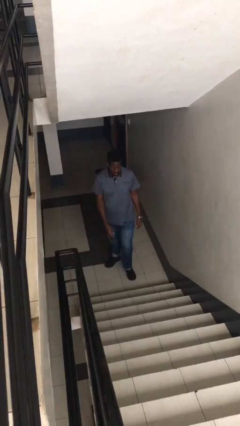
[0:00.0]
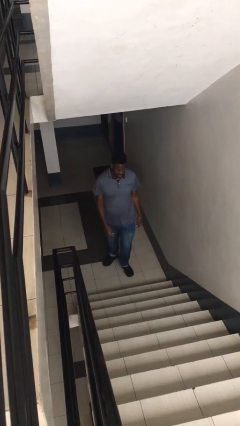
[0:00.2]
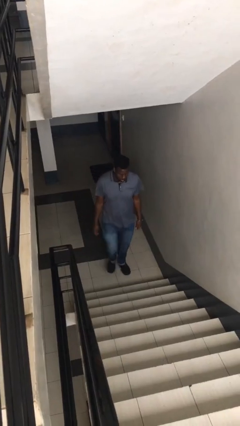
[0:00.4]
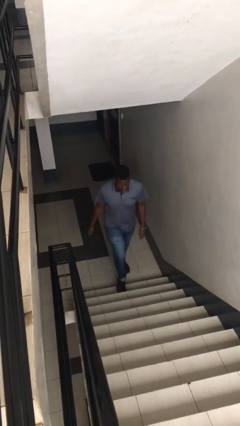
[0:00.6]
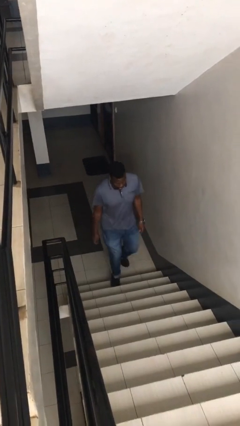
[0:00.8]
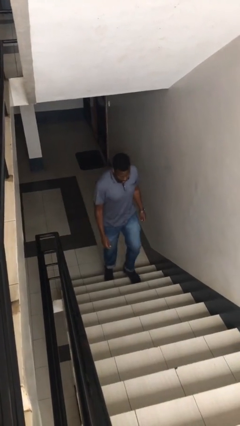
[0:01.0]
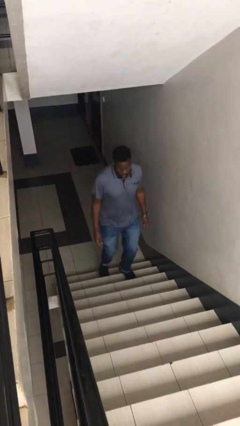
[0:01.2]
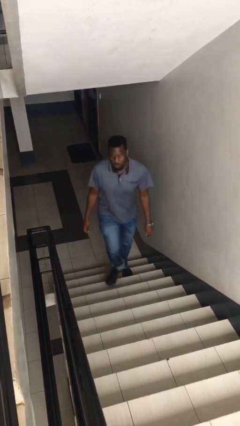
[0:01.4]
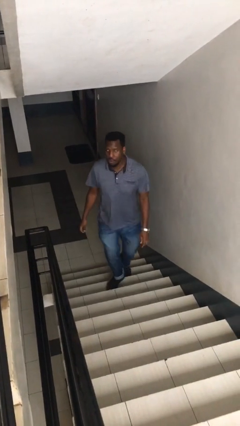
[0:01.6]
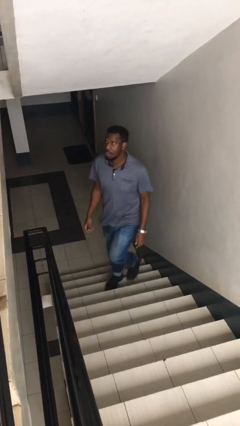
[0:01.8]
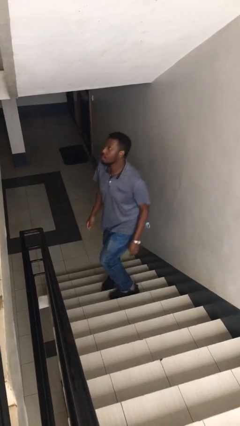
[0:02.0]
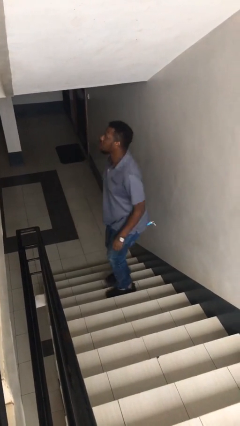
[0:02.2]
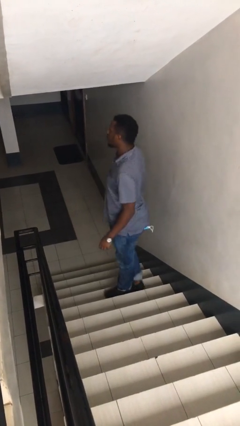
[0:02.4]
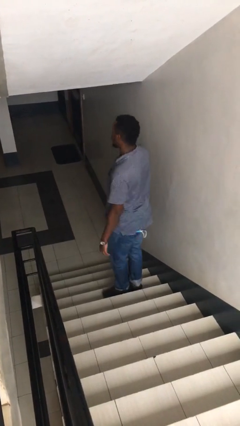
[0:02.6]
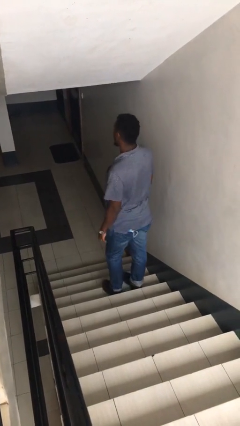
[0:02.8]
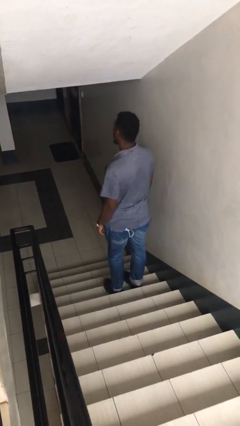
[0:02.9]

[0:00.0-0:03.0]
person climbs up stairs

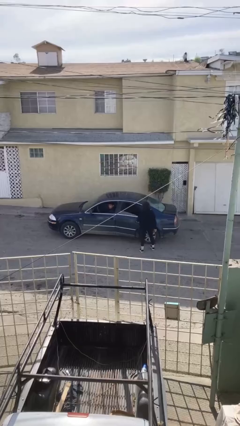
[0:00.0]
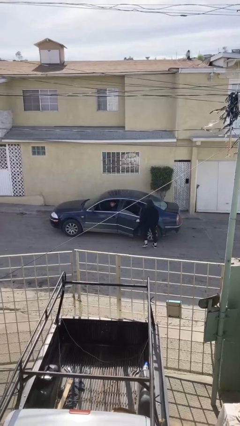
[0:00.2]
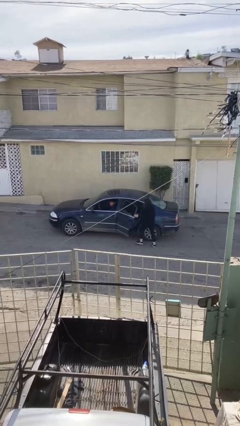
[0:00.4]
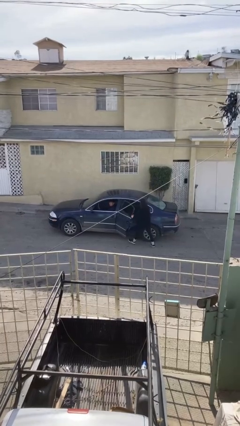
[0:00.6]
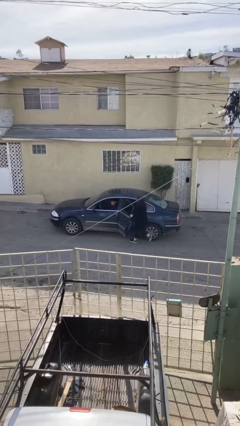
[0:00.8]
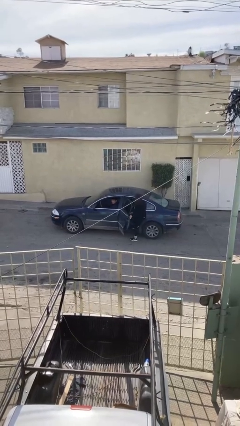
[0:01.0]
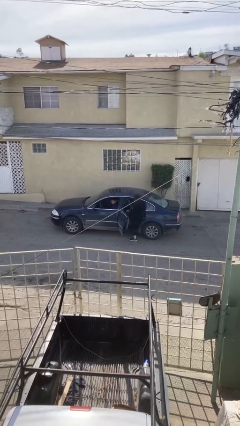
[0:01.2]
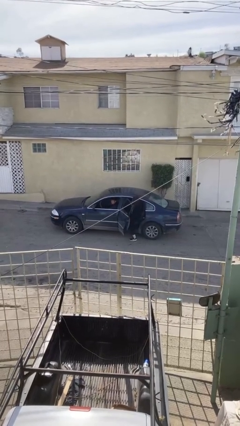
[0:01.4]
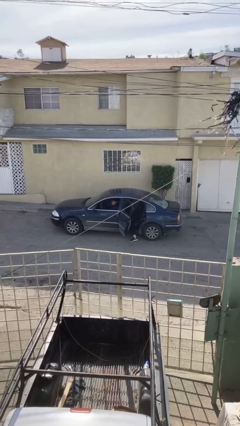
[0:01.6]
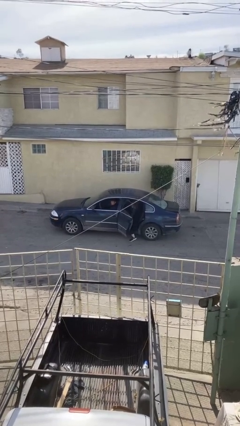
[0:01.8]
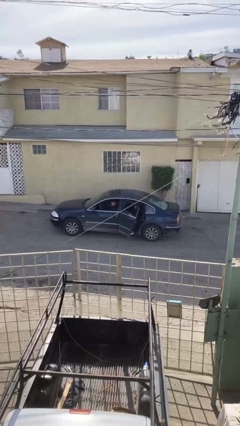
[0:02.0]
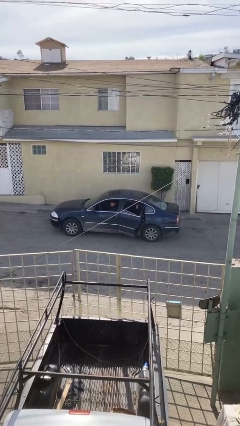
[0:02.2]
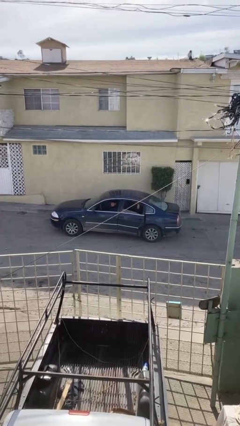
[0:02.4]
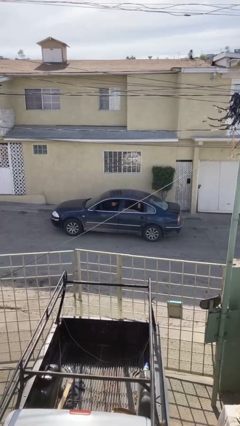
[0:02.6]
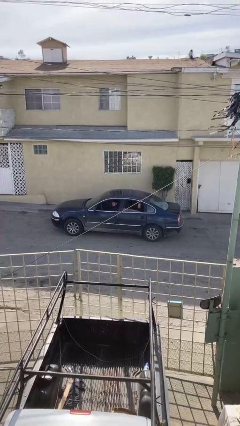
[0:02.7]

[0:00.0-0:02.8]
car picks up person

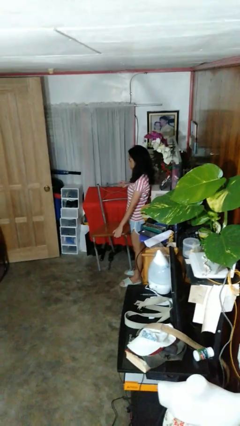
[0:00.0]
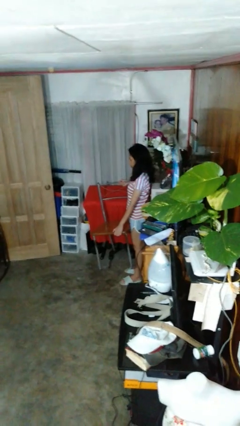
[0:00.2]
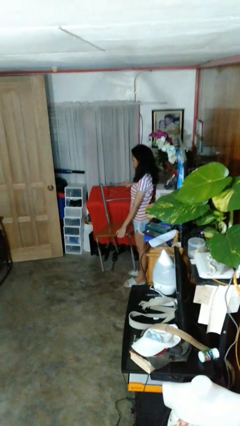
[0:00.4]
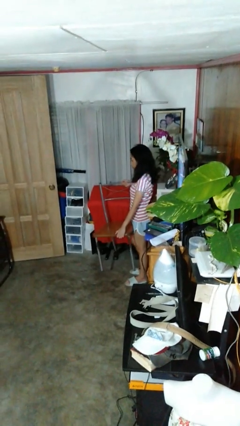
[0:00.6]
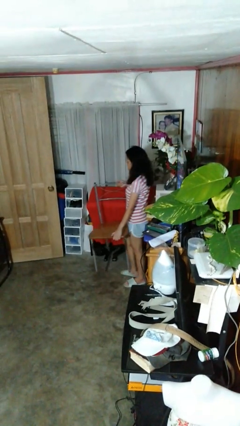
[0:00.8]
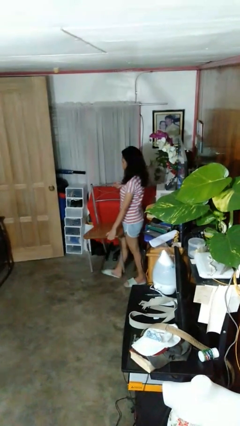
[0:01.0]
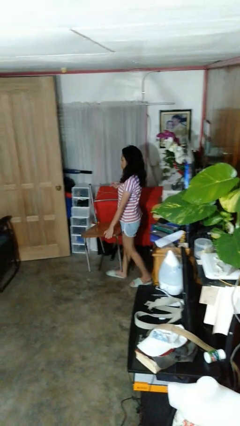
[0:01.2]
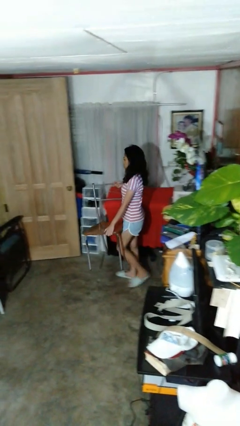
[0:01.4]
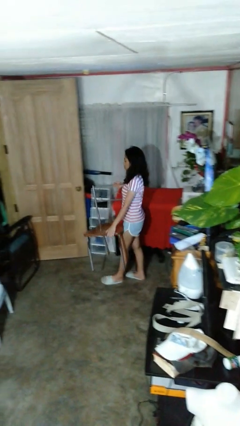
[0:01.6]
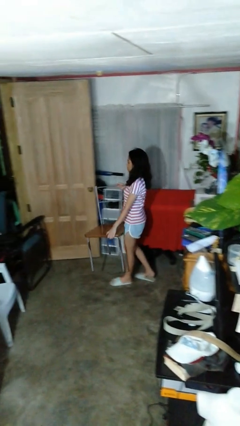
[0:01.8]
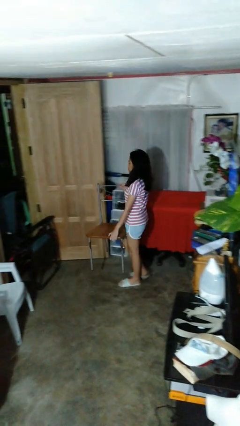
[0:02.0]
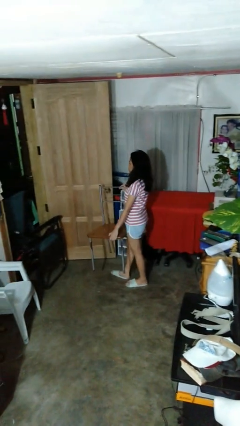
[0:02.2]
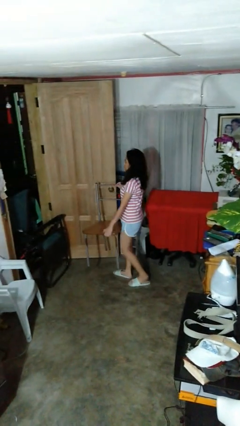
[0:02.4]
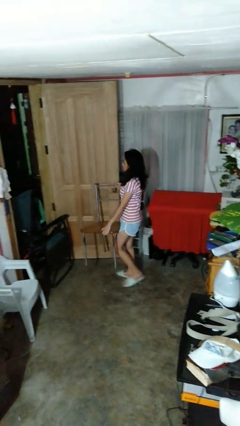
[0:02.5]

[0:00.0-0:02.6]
person carries furniture

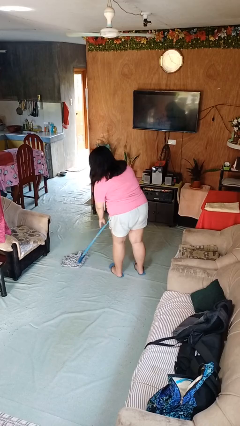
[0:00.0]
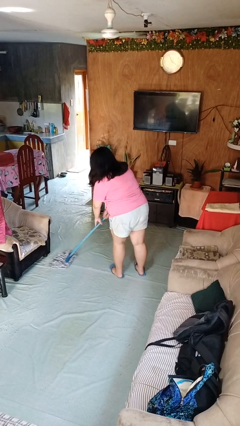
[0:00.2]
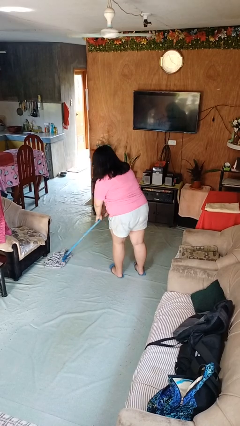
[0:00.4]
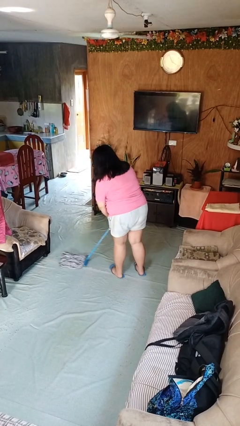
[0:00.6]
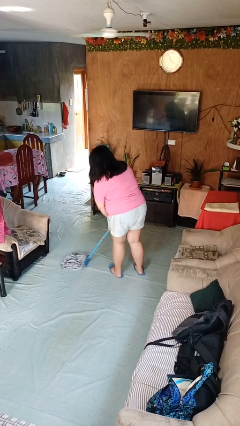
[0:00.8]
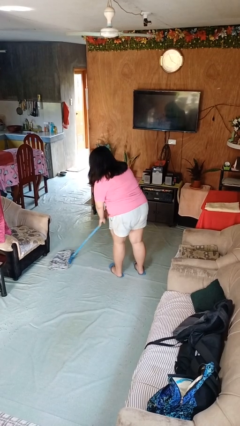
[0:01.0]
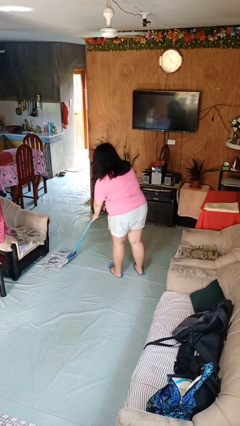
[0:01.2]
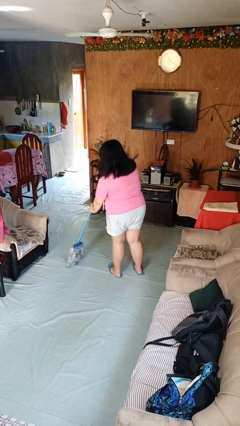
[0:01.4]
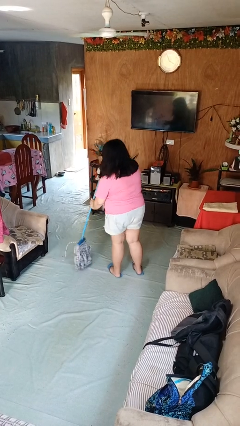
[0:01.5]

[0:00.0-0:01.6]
person mops

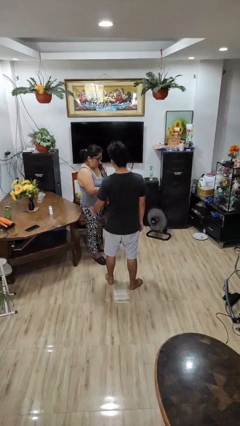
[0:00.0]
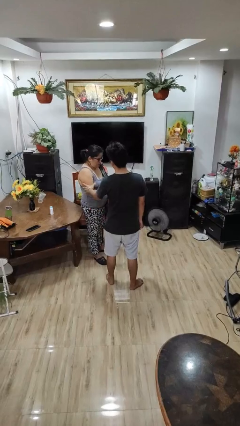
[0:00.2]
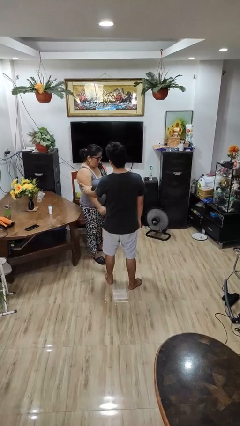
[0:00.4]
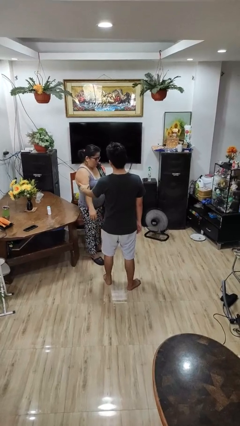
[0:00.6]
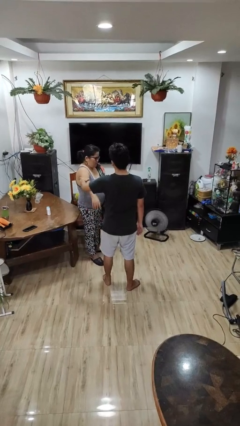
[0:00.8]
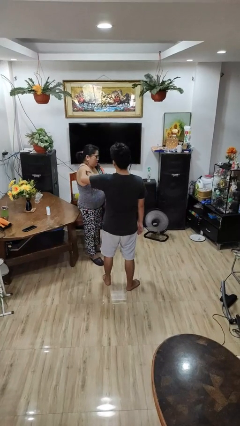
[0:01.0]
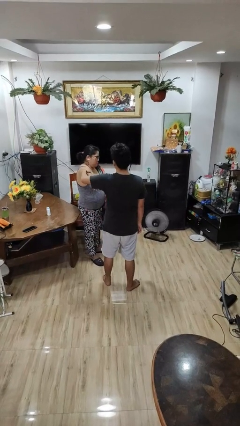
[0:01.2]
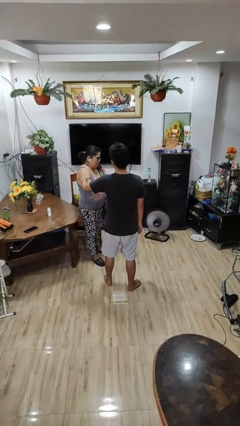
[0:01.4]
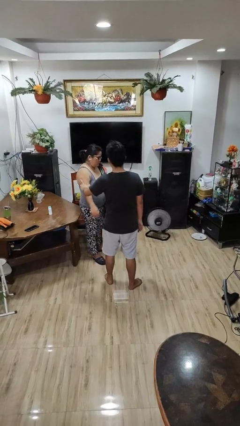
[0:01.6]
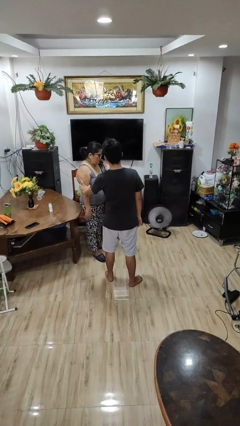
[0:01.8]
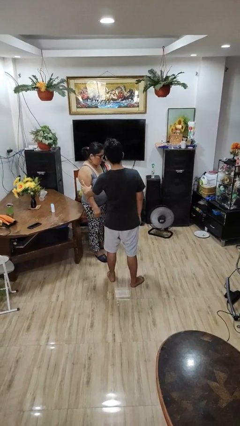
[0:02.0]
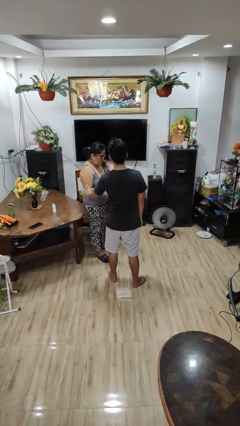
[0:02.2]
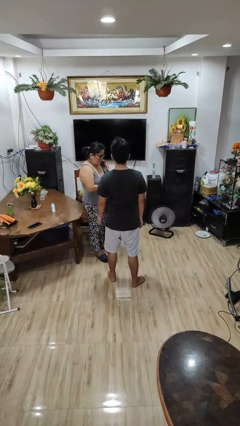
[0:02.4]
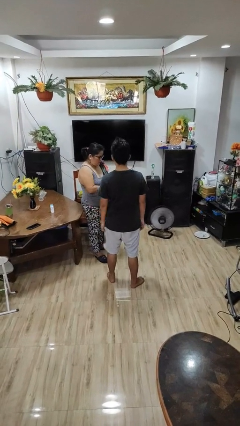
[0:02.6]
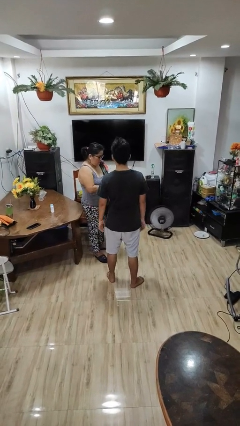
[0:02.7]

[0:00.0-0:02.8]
person grabs person by bicep

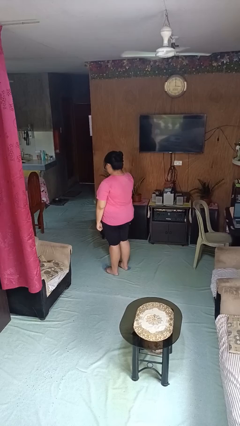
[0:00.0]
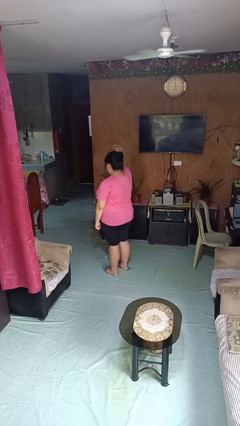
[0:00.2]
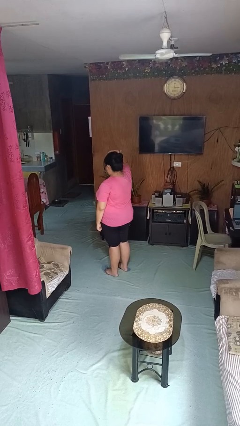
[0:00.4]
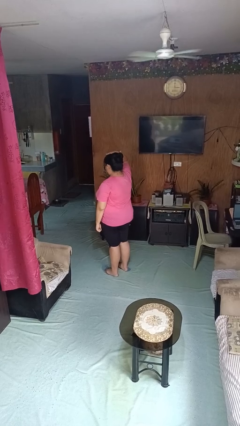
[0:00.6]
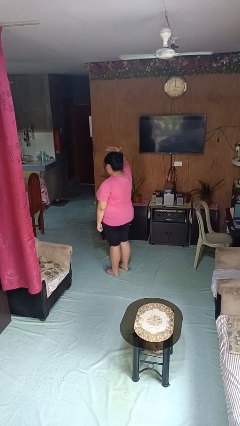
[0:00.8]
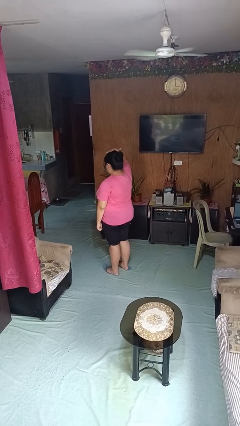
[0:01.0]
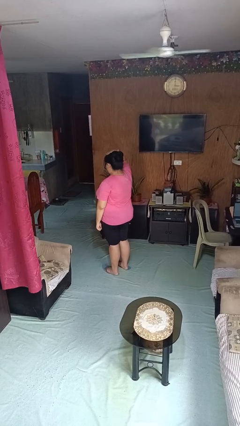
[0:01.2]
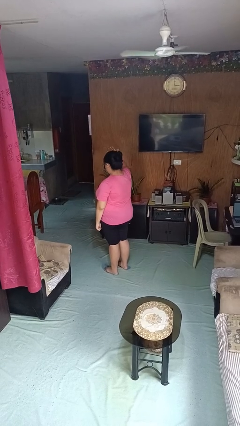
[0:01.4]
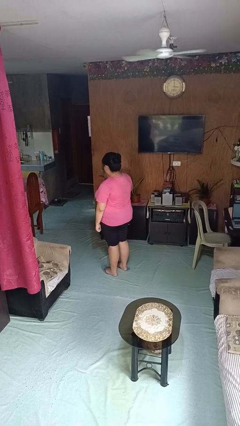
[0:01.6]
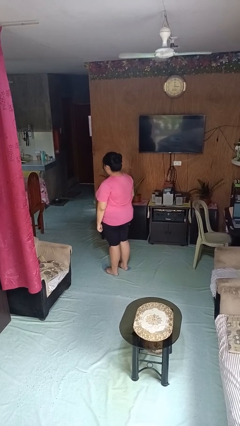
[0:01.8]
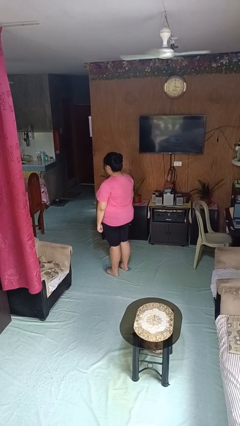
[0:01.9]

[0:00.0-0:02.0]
person pats head

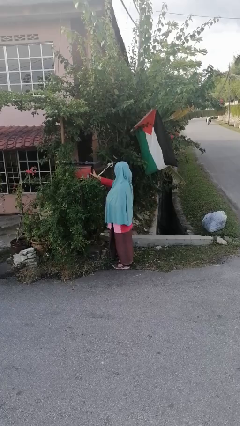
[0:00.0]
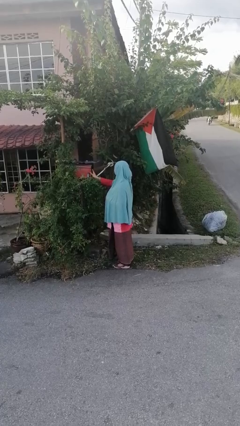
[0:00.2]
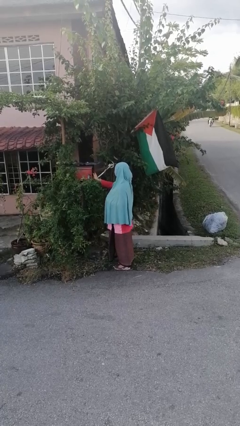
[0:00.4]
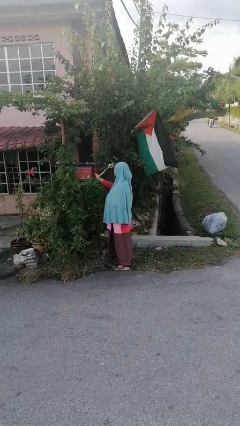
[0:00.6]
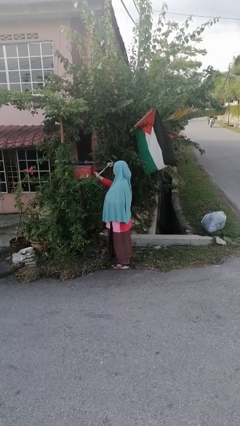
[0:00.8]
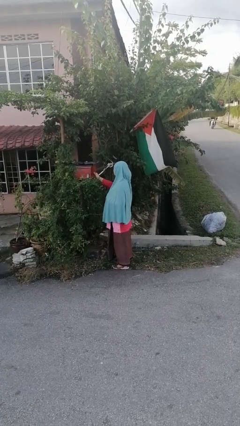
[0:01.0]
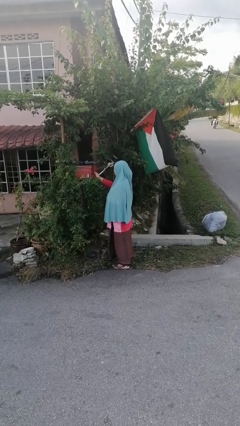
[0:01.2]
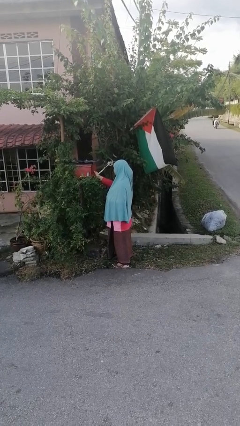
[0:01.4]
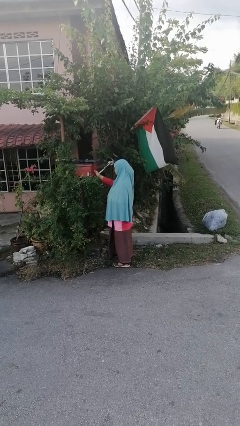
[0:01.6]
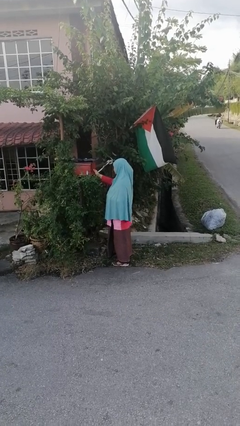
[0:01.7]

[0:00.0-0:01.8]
person opens mailbox

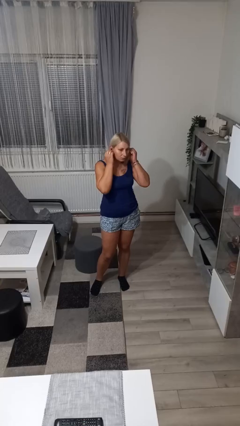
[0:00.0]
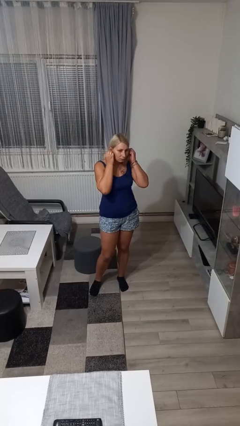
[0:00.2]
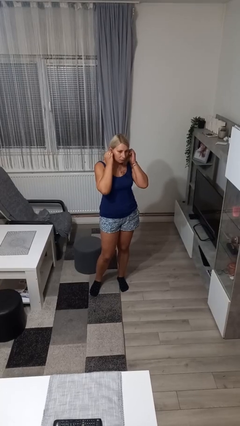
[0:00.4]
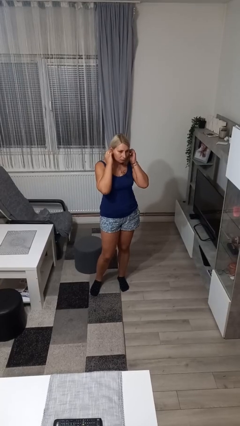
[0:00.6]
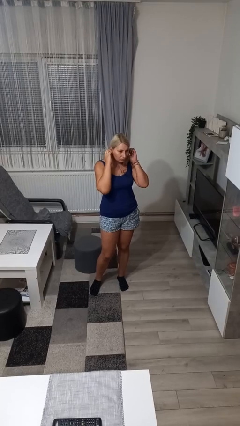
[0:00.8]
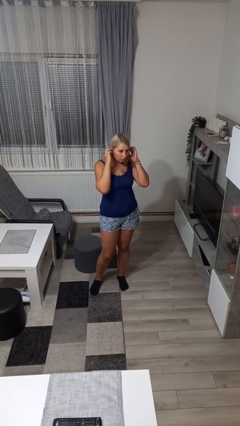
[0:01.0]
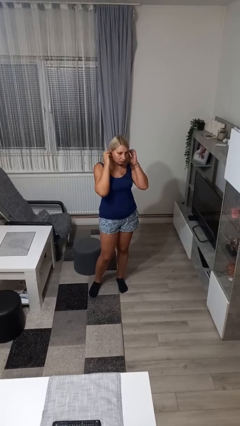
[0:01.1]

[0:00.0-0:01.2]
person puts on headphones
